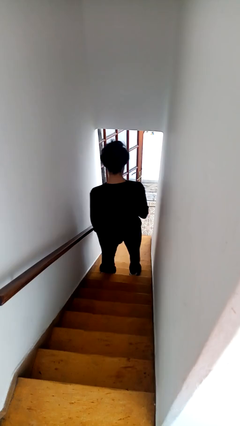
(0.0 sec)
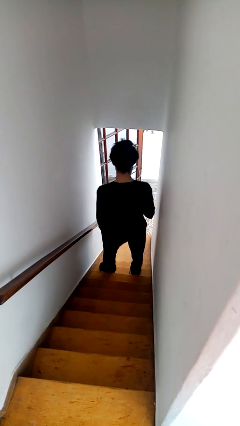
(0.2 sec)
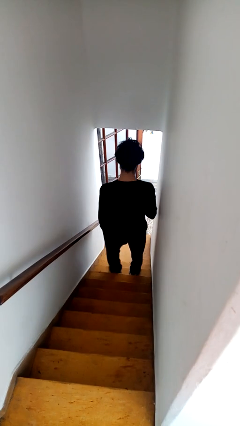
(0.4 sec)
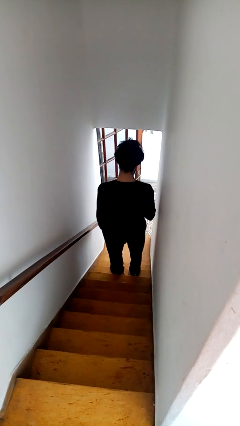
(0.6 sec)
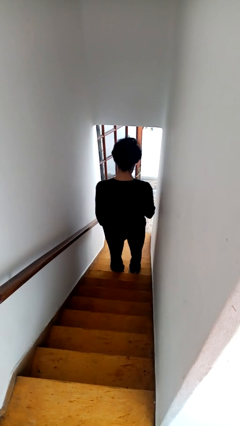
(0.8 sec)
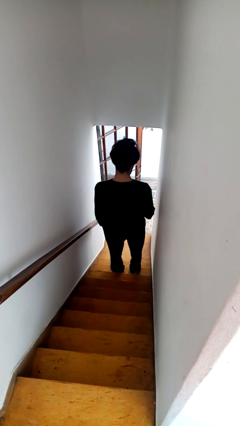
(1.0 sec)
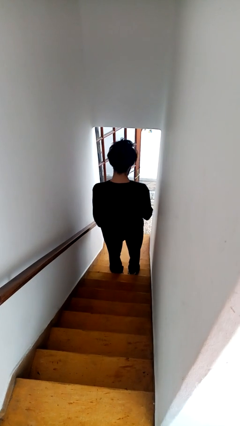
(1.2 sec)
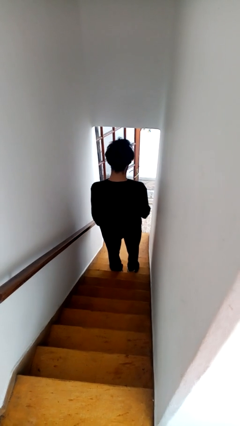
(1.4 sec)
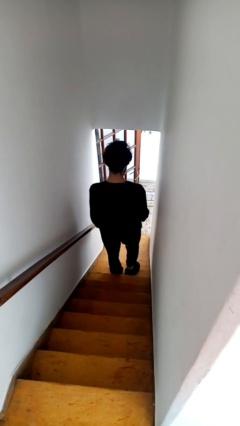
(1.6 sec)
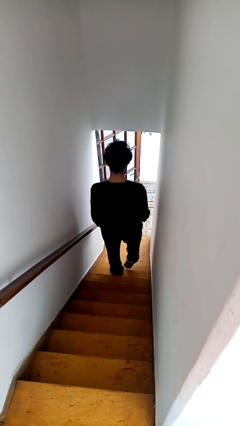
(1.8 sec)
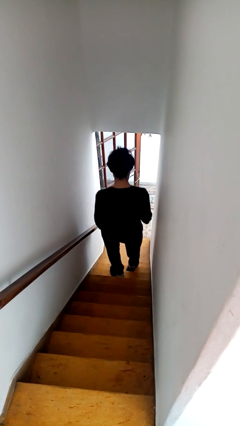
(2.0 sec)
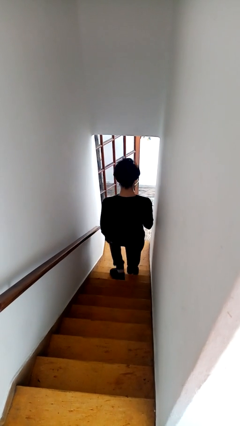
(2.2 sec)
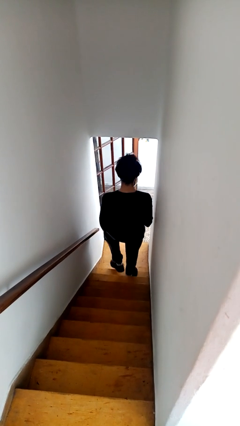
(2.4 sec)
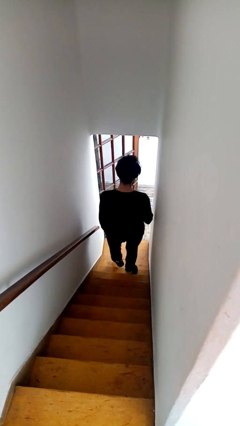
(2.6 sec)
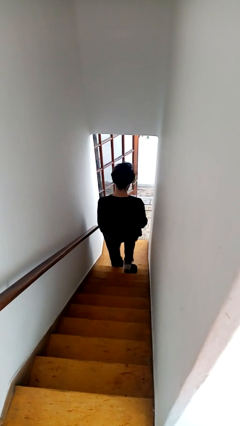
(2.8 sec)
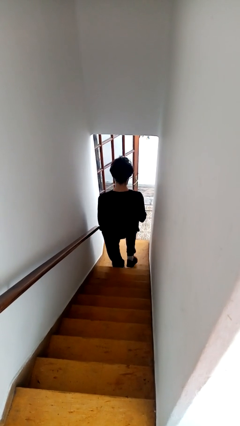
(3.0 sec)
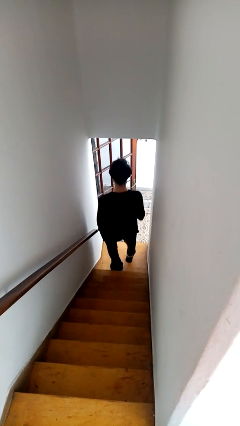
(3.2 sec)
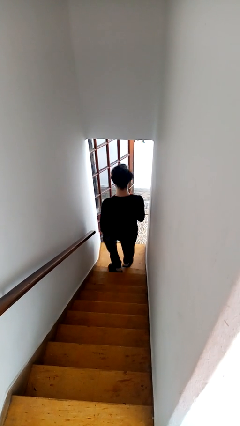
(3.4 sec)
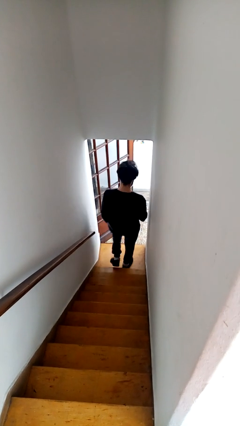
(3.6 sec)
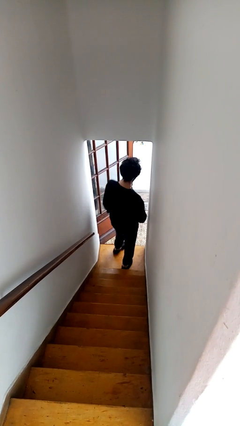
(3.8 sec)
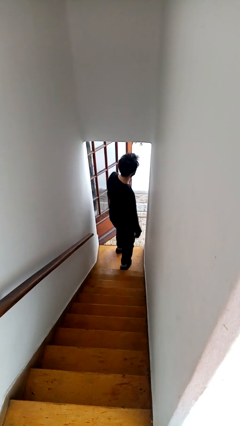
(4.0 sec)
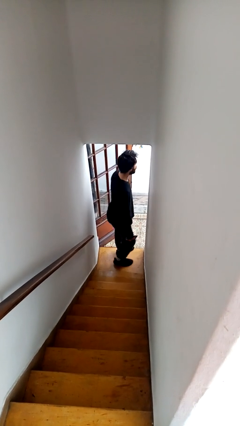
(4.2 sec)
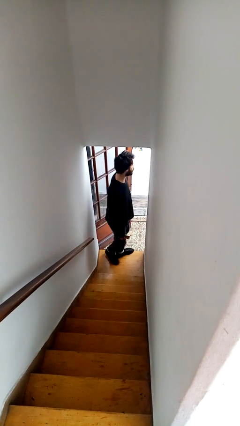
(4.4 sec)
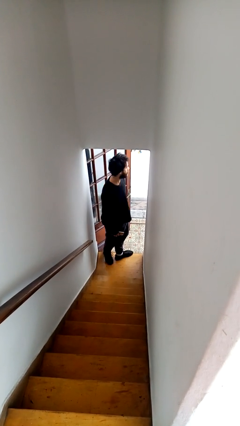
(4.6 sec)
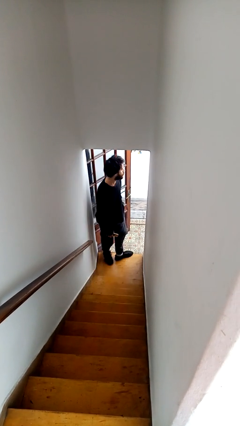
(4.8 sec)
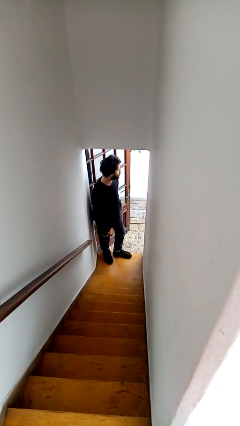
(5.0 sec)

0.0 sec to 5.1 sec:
person climbs down stairs

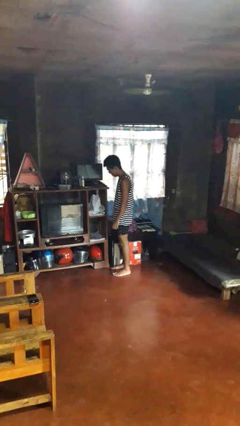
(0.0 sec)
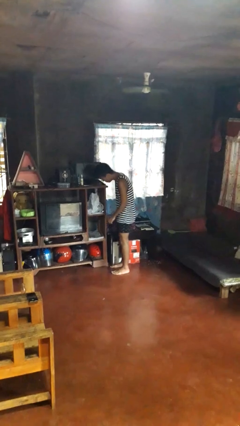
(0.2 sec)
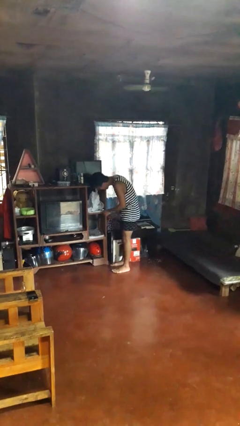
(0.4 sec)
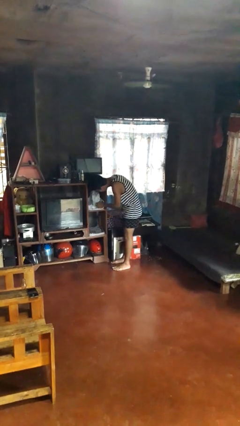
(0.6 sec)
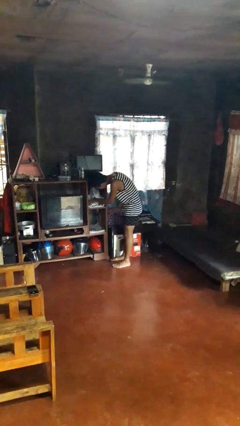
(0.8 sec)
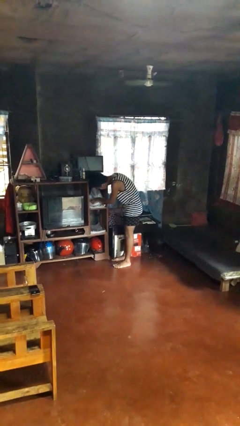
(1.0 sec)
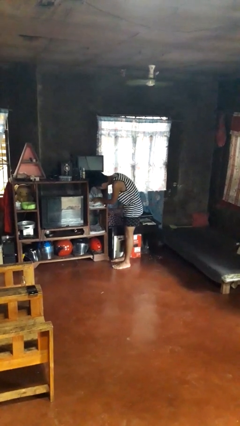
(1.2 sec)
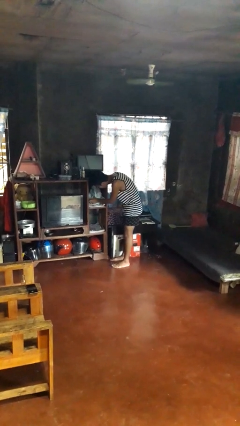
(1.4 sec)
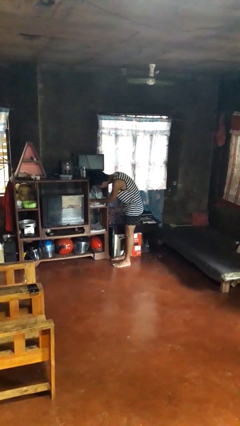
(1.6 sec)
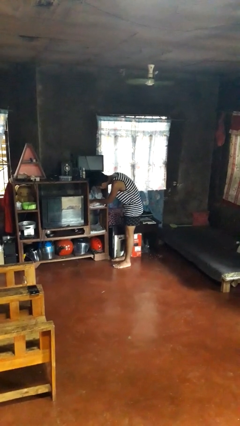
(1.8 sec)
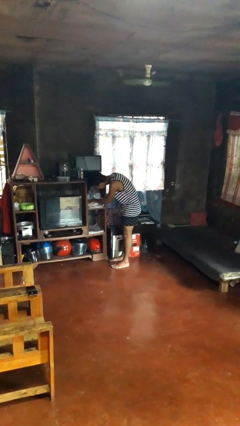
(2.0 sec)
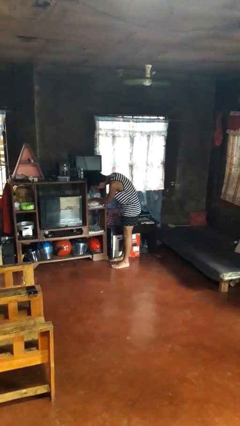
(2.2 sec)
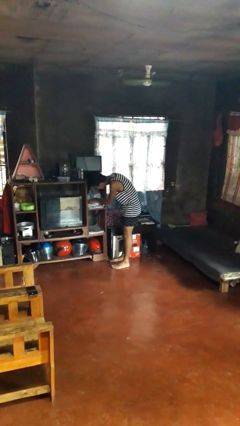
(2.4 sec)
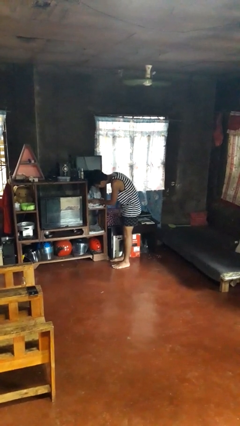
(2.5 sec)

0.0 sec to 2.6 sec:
person searches in cabinet

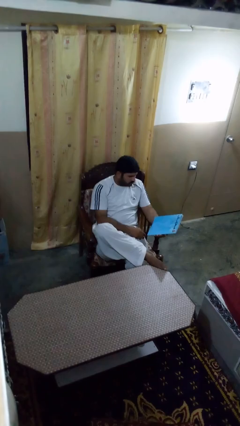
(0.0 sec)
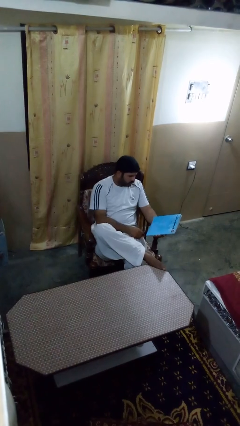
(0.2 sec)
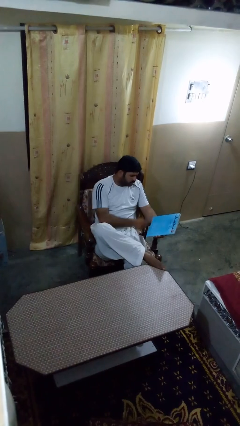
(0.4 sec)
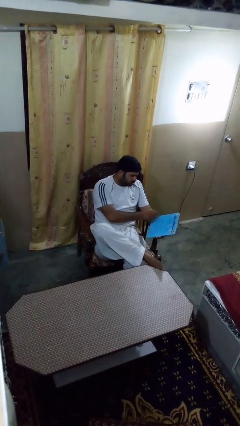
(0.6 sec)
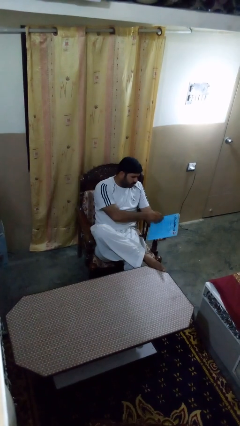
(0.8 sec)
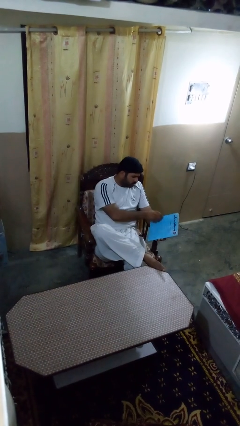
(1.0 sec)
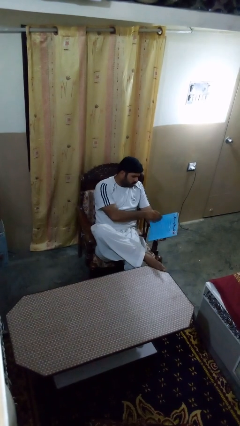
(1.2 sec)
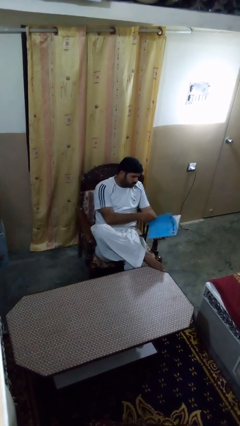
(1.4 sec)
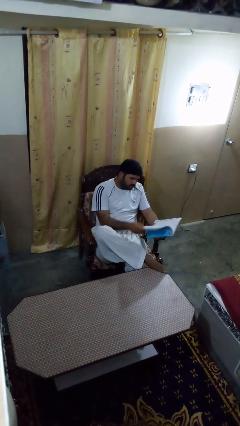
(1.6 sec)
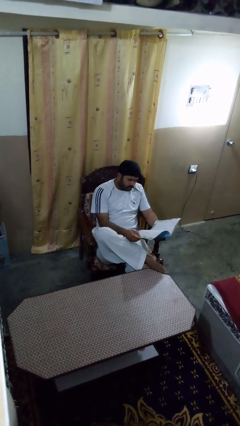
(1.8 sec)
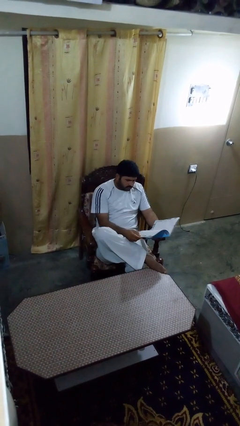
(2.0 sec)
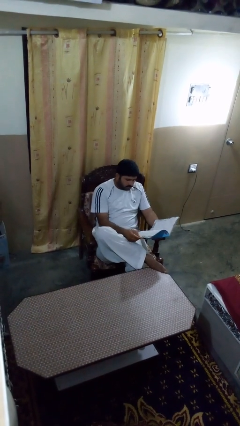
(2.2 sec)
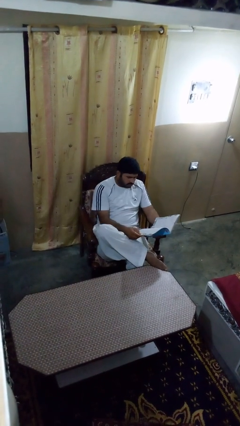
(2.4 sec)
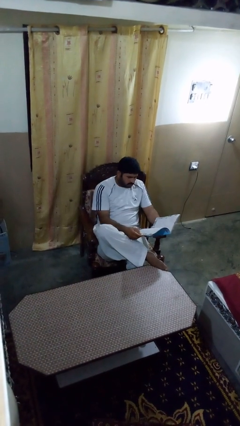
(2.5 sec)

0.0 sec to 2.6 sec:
person reads magazine

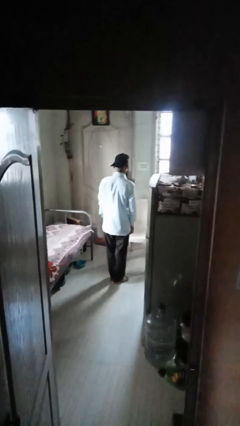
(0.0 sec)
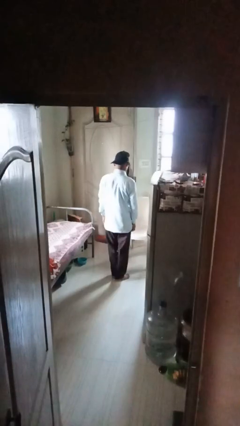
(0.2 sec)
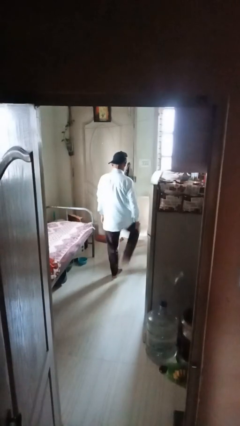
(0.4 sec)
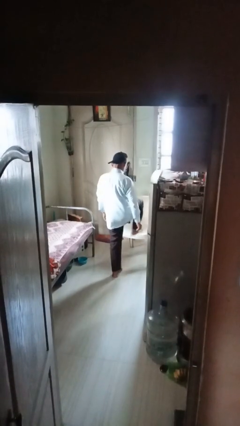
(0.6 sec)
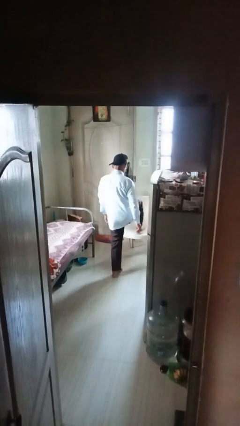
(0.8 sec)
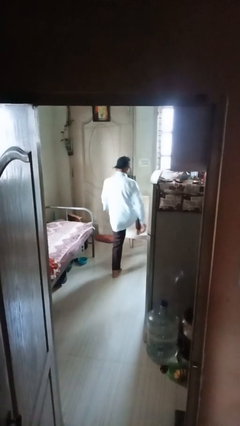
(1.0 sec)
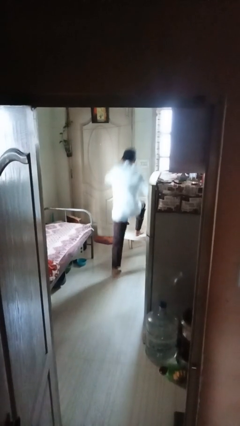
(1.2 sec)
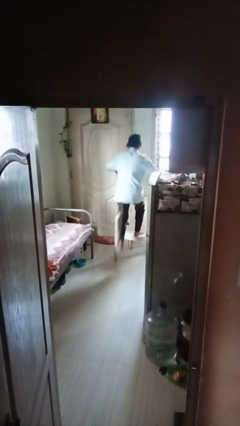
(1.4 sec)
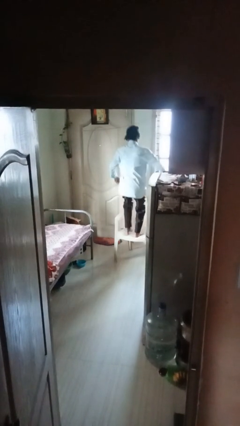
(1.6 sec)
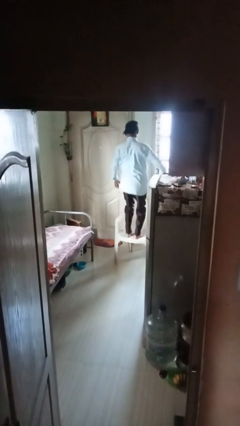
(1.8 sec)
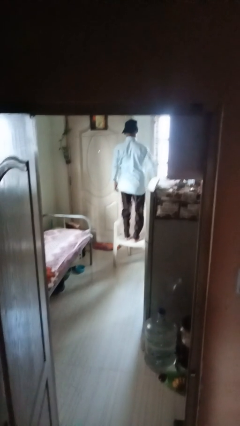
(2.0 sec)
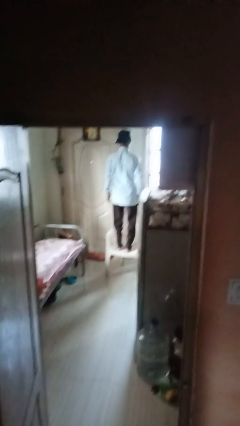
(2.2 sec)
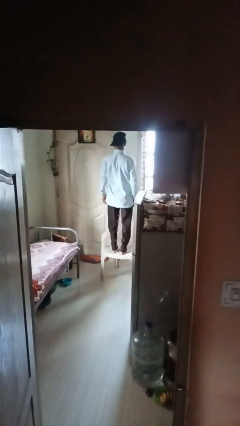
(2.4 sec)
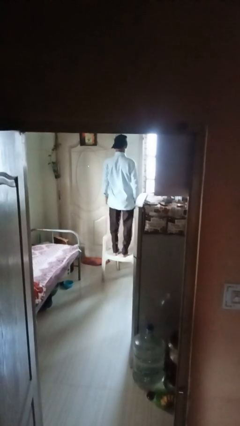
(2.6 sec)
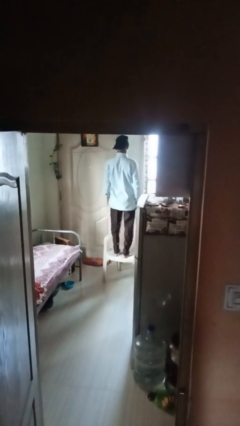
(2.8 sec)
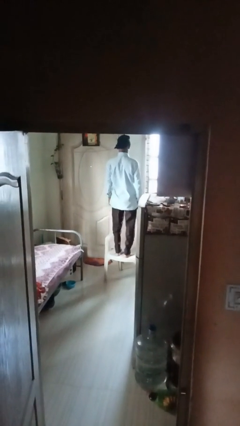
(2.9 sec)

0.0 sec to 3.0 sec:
person climbs on chair

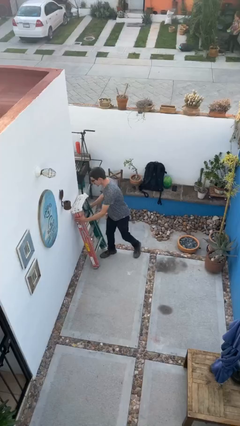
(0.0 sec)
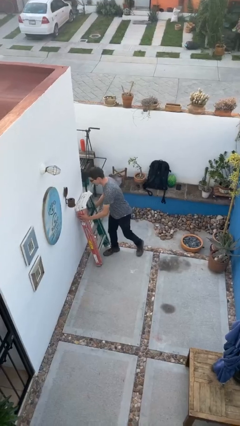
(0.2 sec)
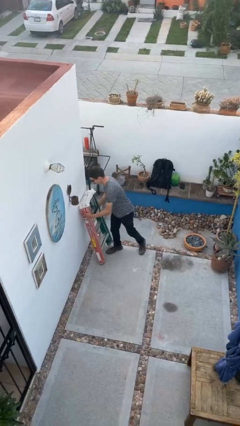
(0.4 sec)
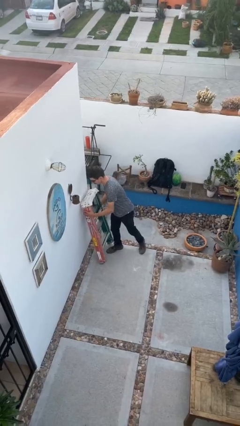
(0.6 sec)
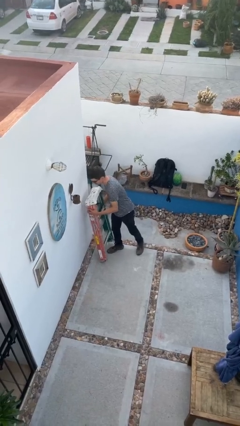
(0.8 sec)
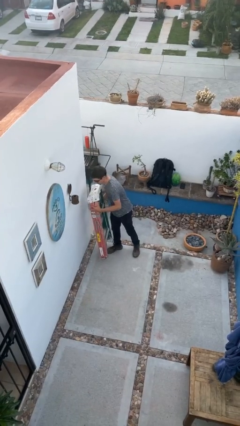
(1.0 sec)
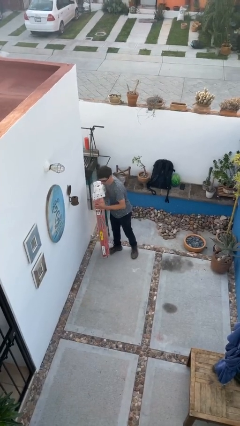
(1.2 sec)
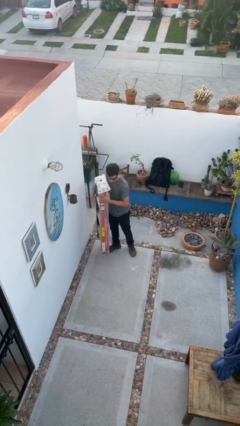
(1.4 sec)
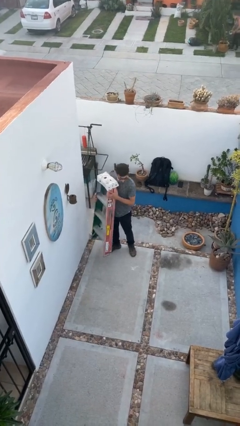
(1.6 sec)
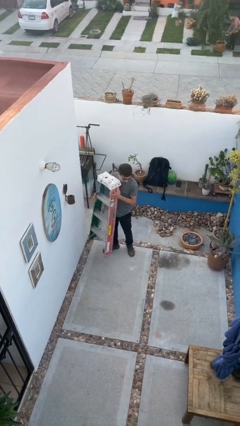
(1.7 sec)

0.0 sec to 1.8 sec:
person picks up object from floor

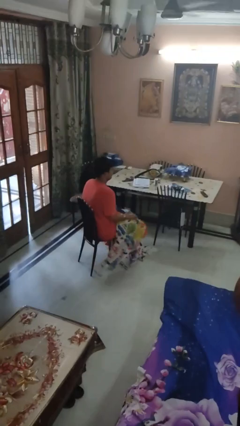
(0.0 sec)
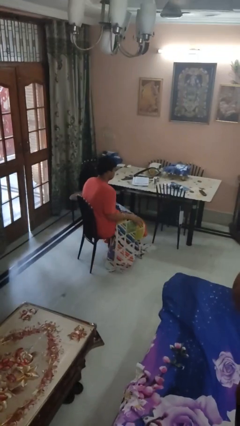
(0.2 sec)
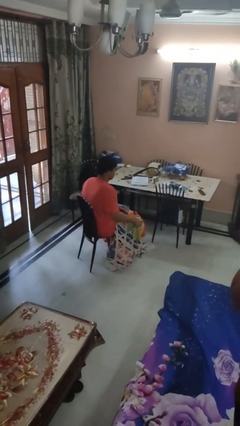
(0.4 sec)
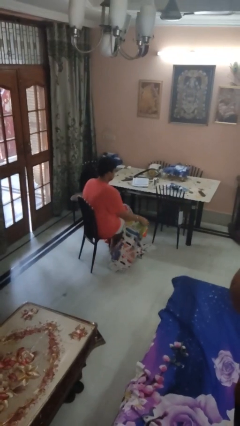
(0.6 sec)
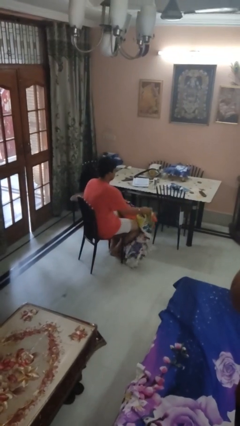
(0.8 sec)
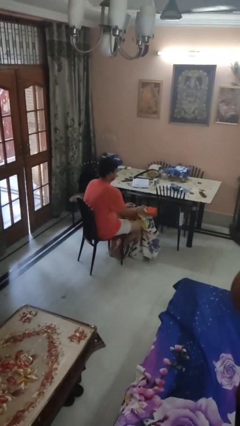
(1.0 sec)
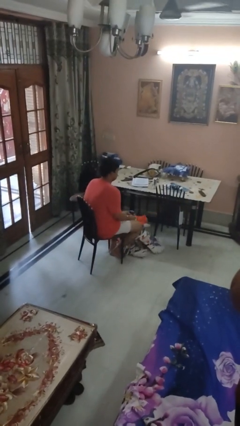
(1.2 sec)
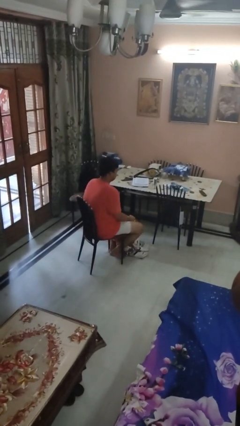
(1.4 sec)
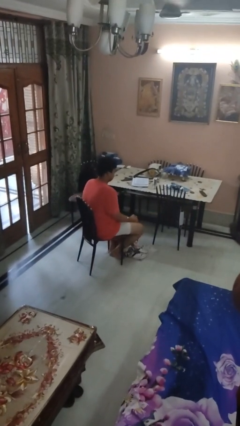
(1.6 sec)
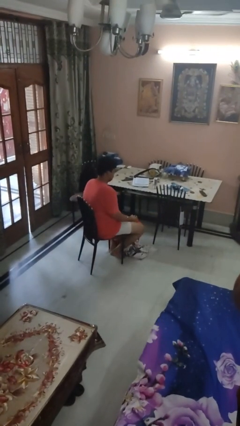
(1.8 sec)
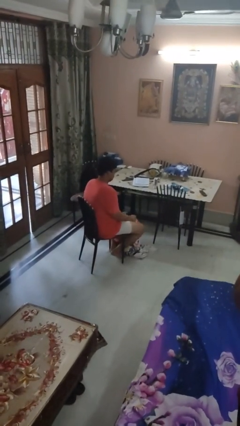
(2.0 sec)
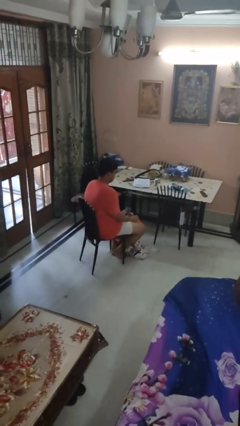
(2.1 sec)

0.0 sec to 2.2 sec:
person uncovers with blanket

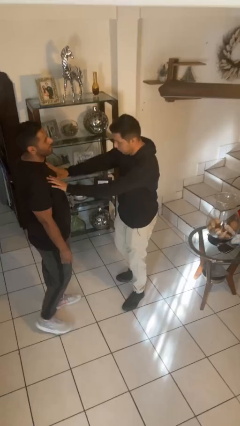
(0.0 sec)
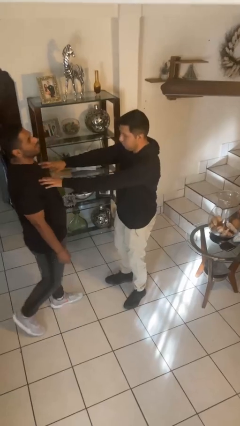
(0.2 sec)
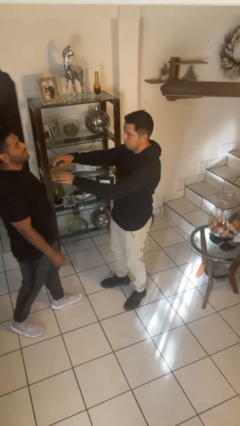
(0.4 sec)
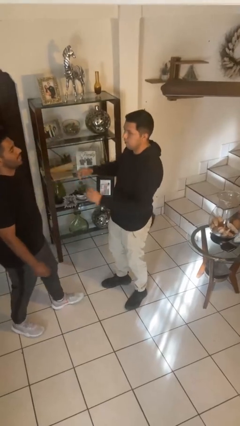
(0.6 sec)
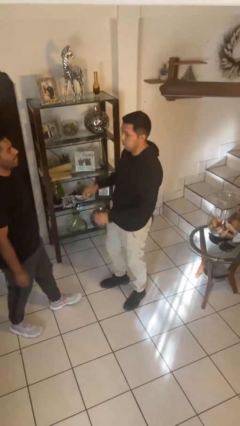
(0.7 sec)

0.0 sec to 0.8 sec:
person shoves person
